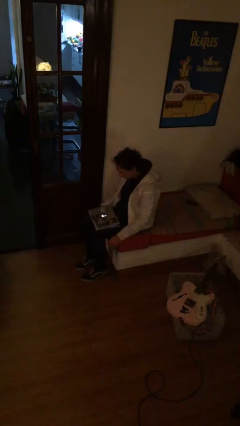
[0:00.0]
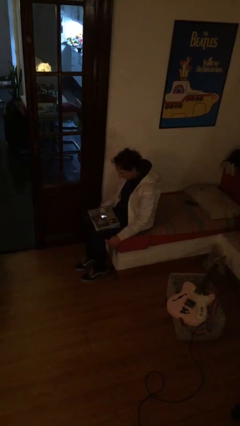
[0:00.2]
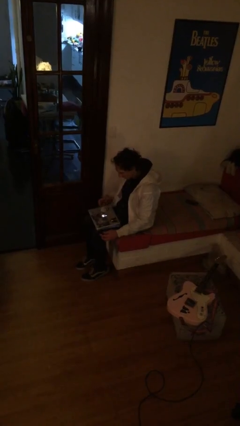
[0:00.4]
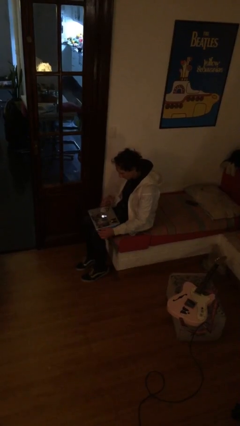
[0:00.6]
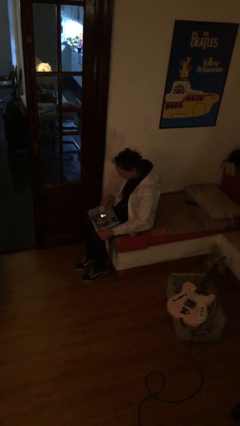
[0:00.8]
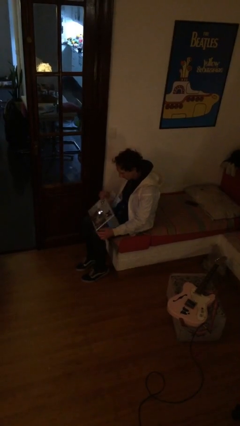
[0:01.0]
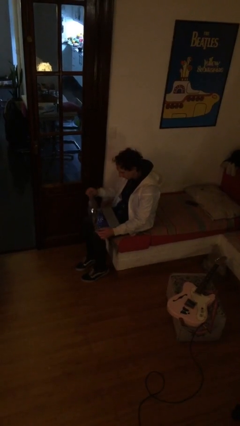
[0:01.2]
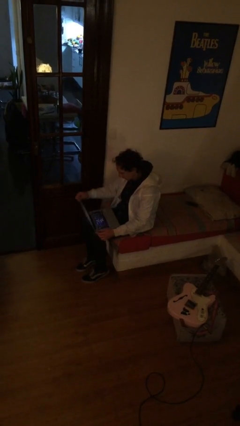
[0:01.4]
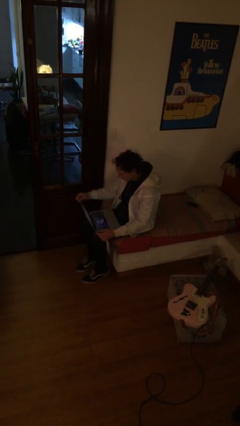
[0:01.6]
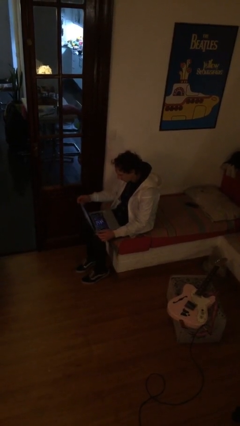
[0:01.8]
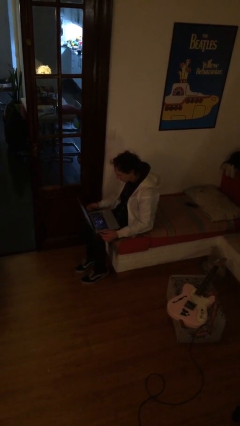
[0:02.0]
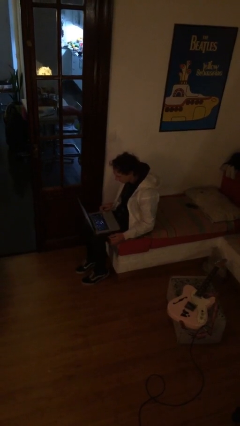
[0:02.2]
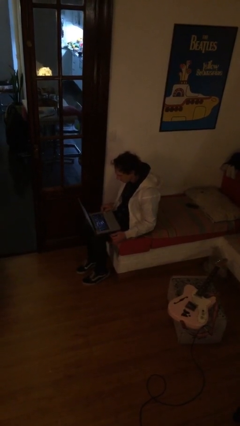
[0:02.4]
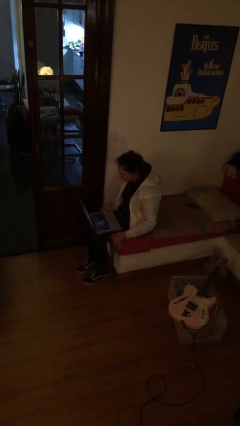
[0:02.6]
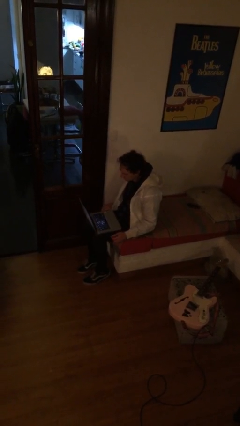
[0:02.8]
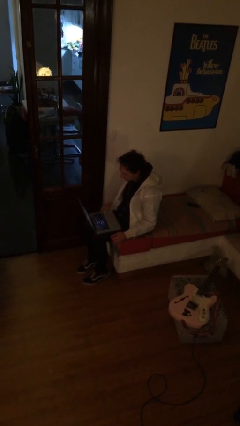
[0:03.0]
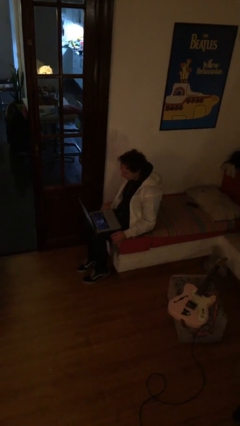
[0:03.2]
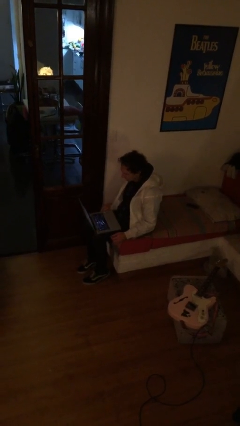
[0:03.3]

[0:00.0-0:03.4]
person opens laptop

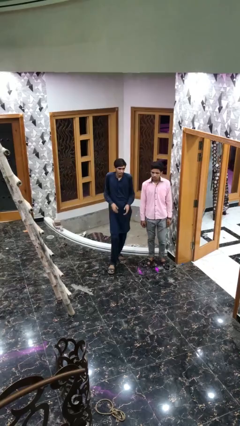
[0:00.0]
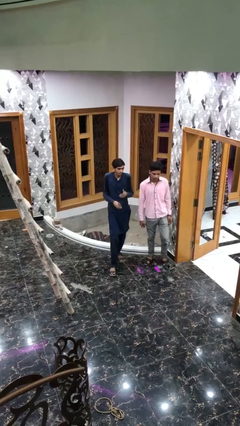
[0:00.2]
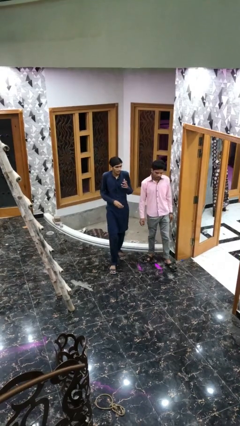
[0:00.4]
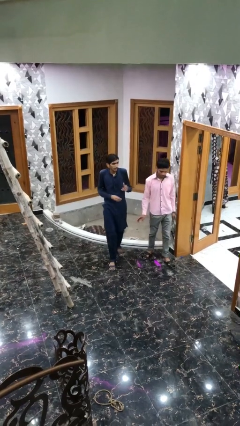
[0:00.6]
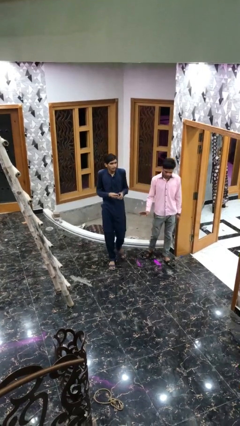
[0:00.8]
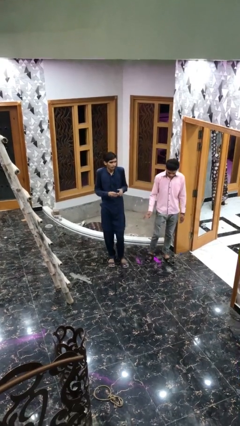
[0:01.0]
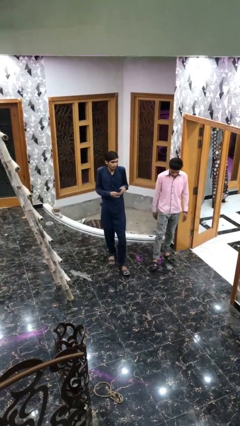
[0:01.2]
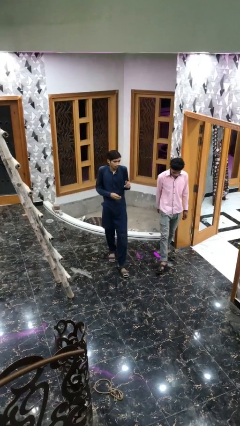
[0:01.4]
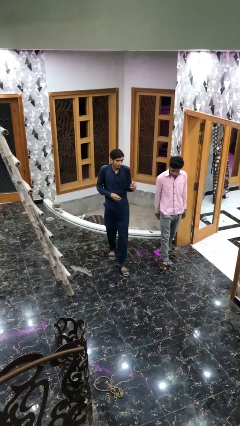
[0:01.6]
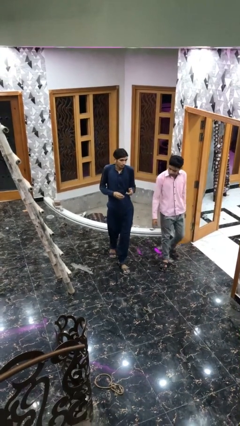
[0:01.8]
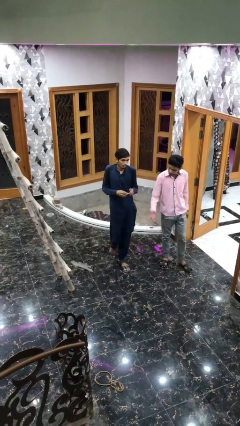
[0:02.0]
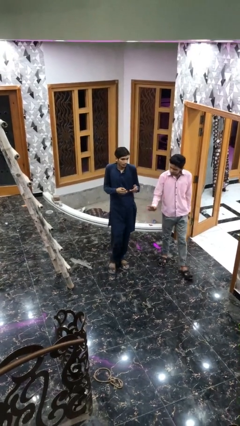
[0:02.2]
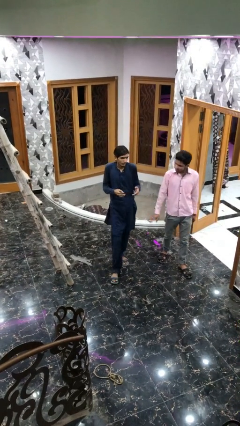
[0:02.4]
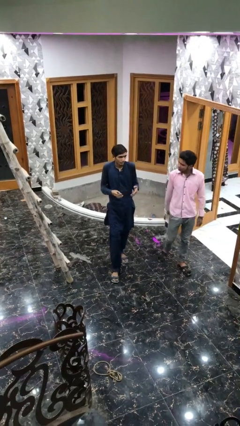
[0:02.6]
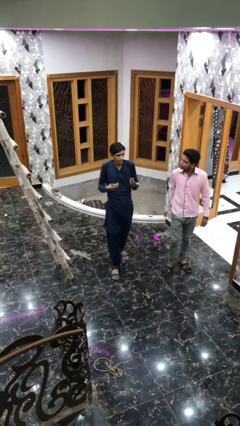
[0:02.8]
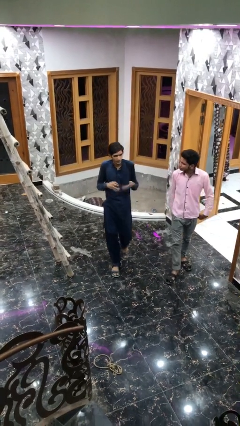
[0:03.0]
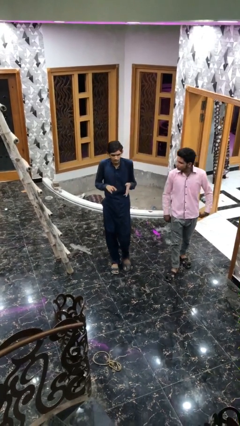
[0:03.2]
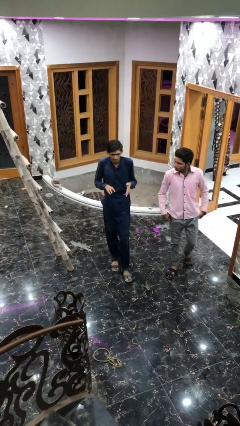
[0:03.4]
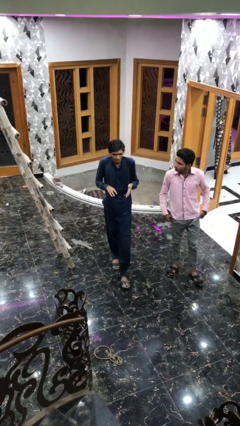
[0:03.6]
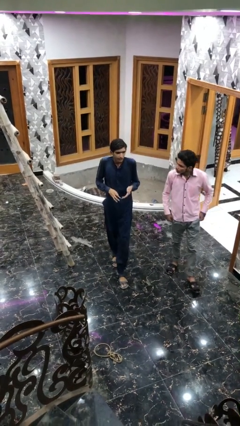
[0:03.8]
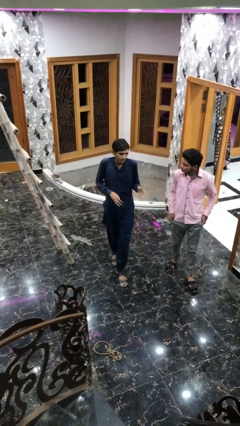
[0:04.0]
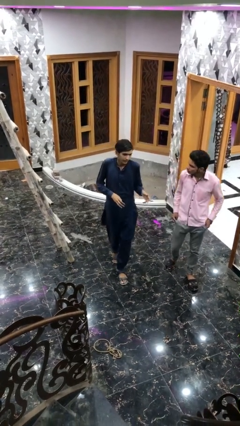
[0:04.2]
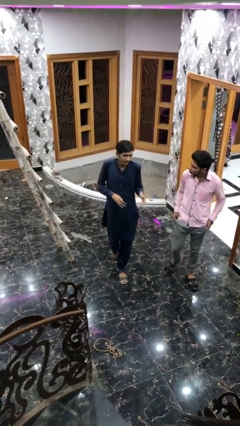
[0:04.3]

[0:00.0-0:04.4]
person talks to person

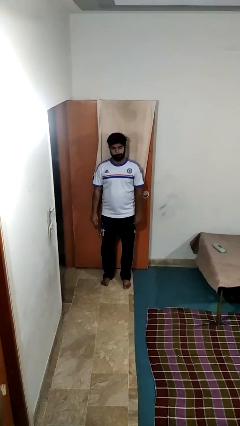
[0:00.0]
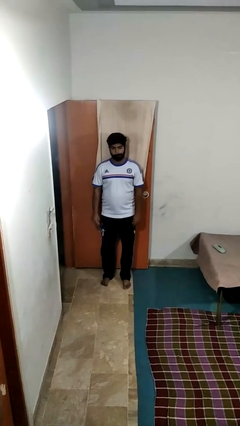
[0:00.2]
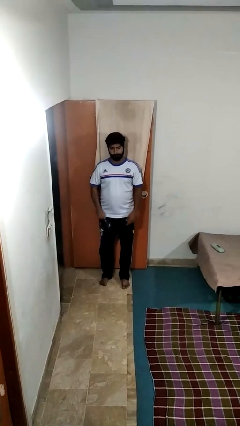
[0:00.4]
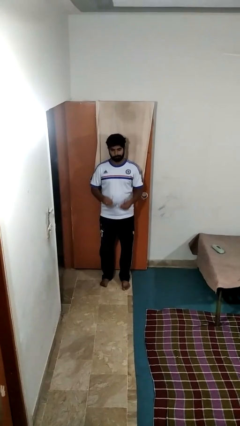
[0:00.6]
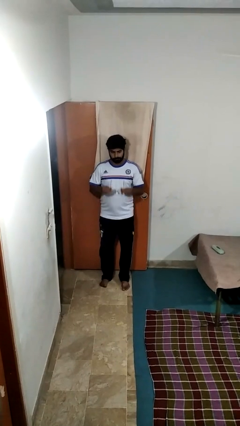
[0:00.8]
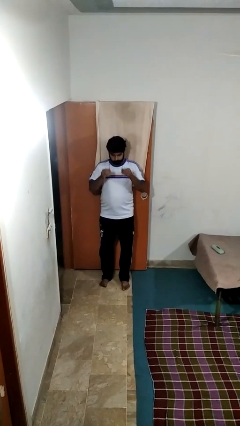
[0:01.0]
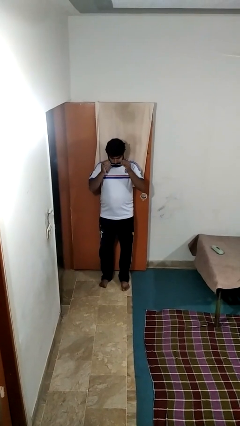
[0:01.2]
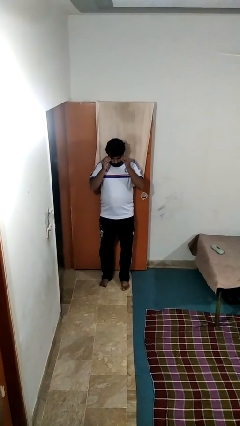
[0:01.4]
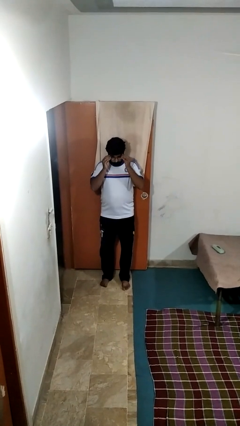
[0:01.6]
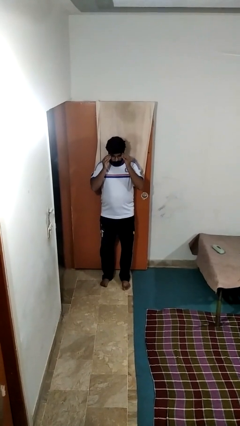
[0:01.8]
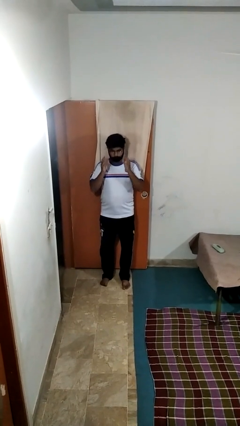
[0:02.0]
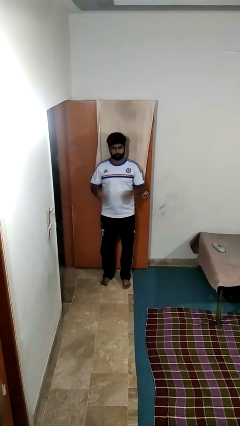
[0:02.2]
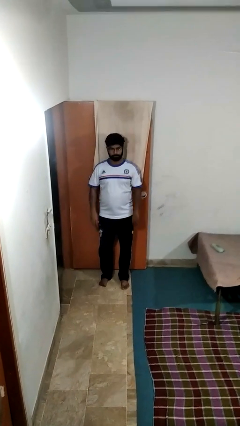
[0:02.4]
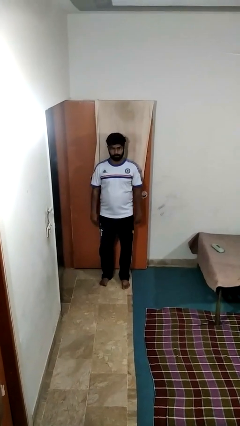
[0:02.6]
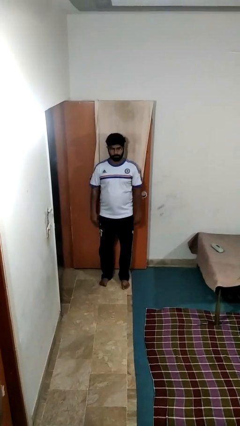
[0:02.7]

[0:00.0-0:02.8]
person puts on glasses

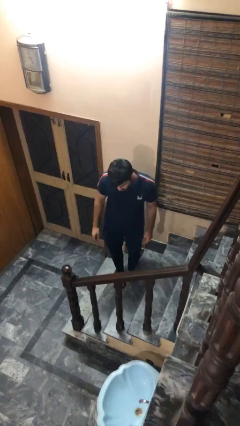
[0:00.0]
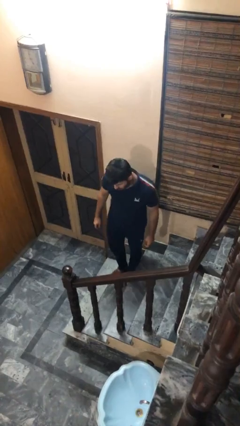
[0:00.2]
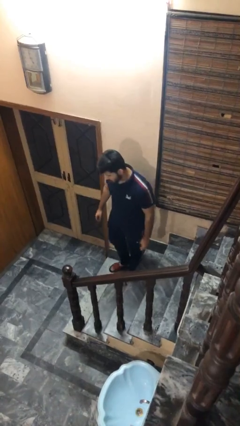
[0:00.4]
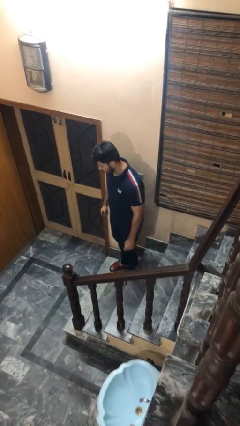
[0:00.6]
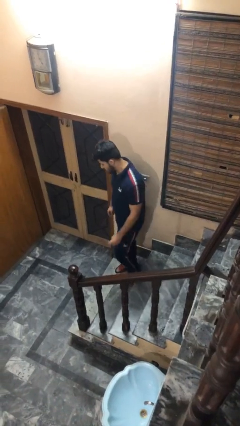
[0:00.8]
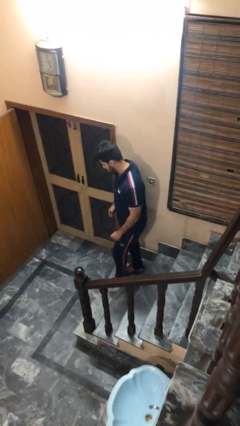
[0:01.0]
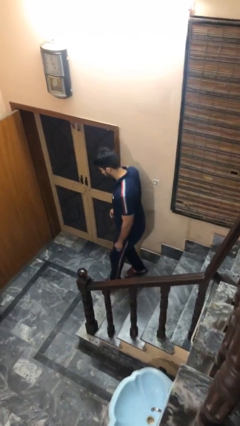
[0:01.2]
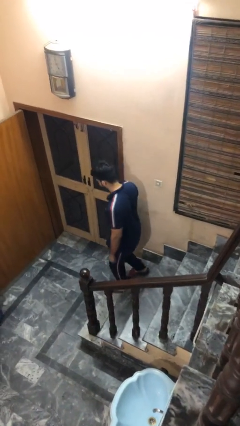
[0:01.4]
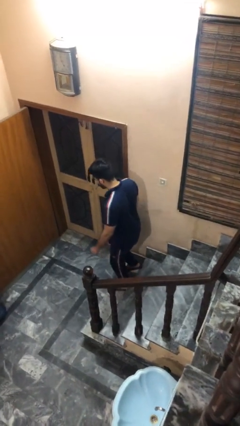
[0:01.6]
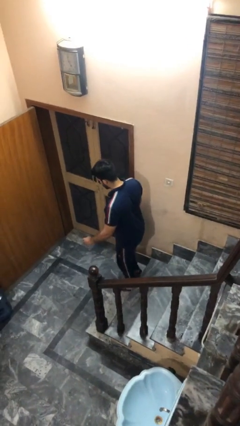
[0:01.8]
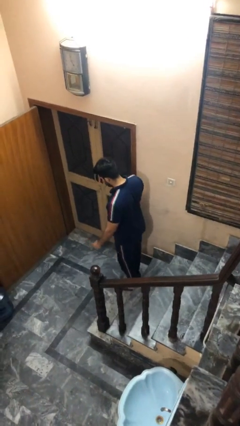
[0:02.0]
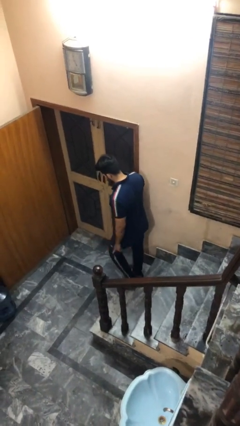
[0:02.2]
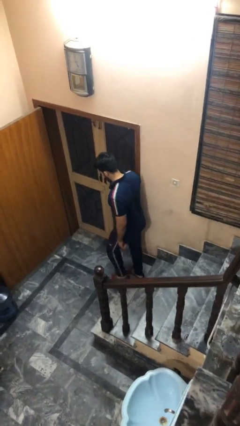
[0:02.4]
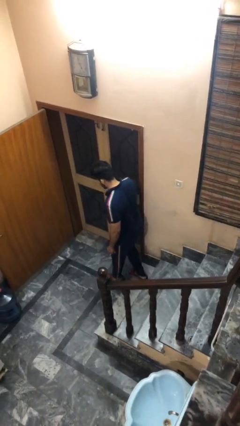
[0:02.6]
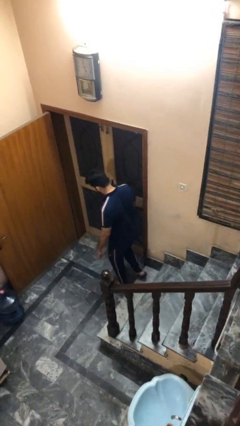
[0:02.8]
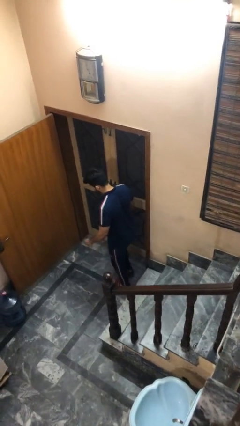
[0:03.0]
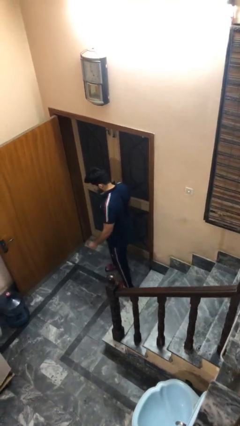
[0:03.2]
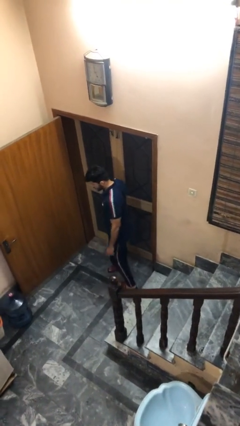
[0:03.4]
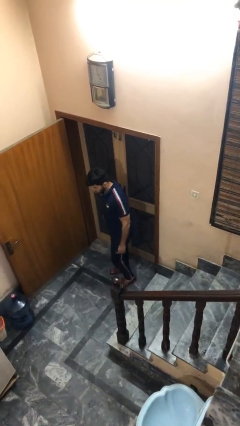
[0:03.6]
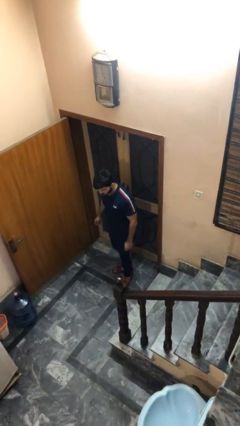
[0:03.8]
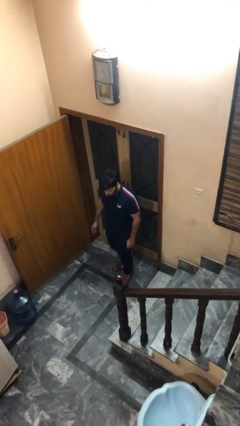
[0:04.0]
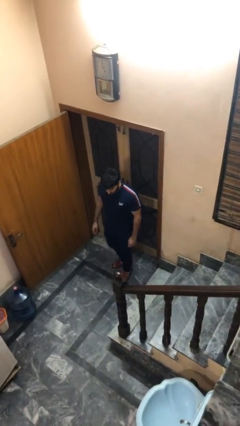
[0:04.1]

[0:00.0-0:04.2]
person climbs down stairs

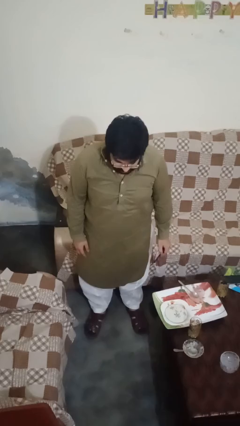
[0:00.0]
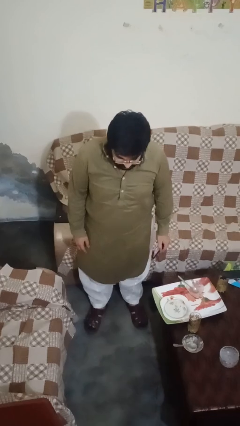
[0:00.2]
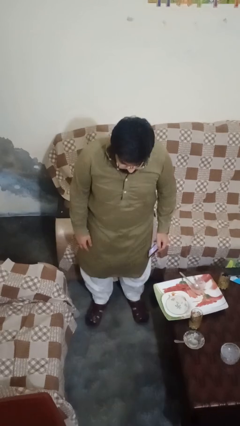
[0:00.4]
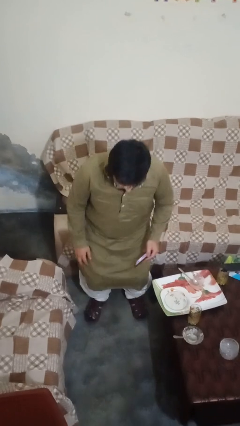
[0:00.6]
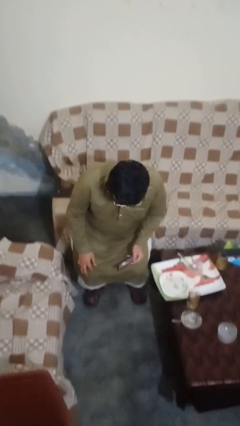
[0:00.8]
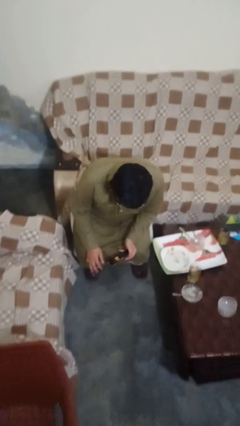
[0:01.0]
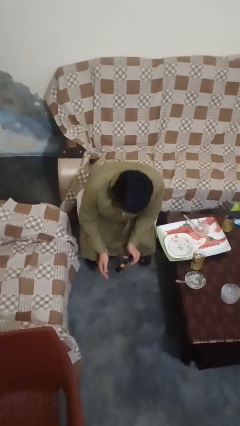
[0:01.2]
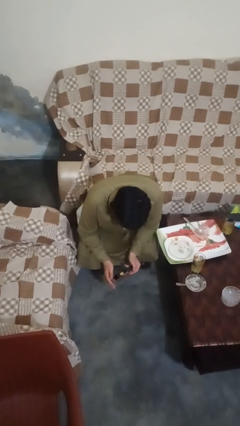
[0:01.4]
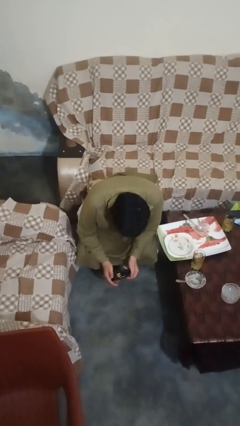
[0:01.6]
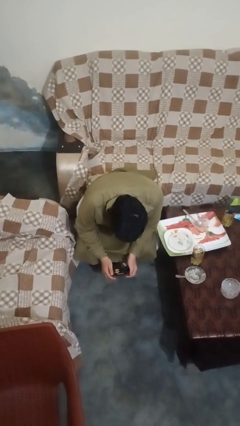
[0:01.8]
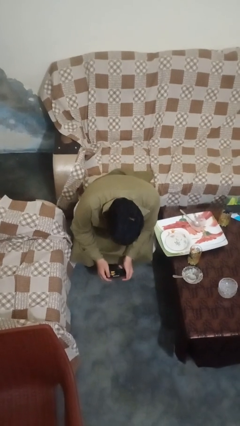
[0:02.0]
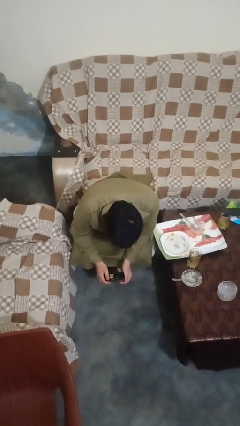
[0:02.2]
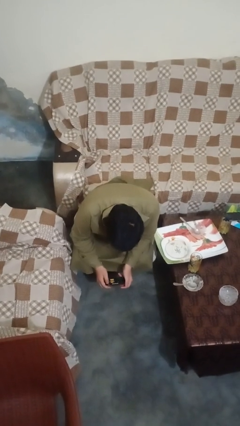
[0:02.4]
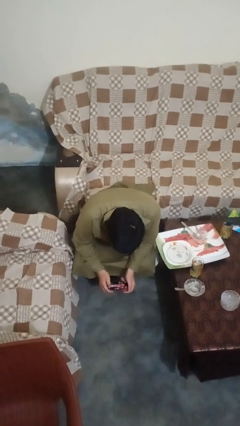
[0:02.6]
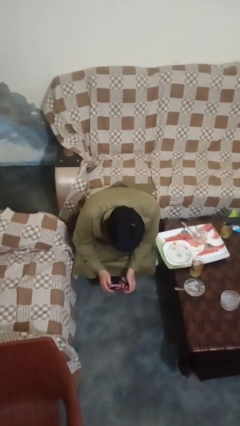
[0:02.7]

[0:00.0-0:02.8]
person squats
